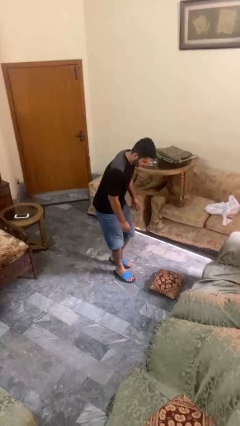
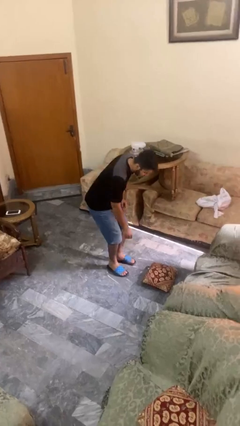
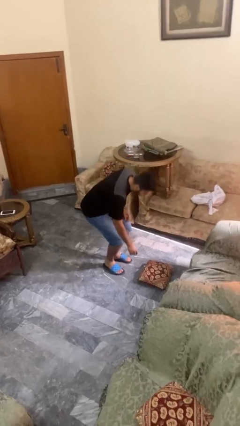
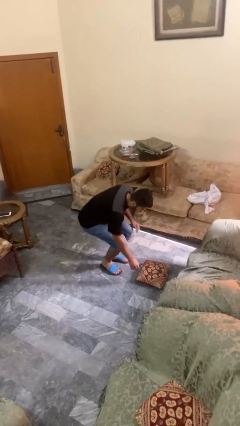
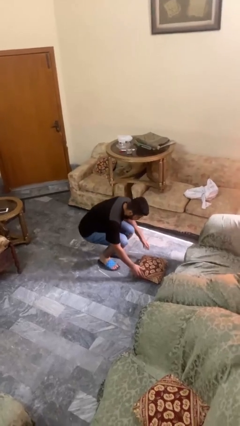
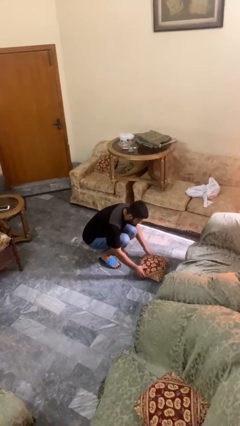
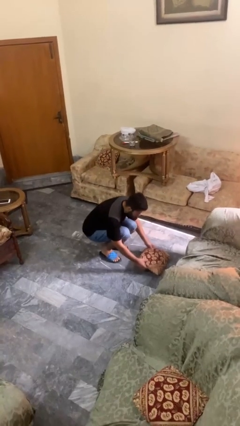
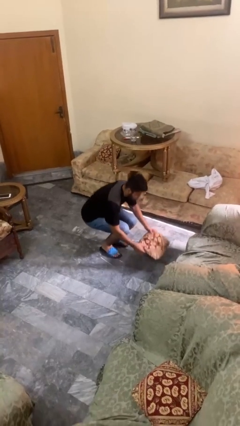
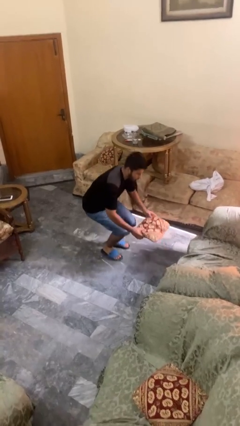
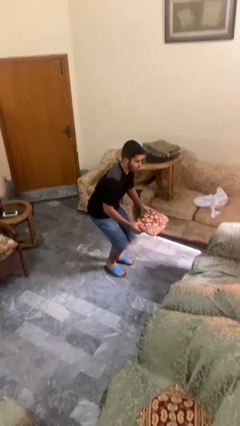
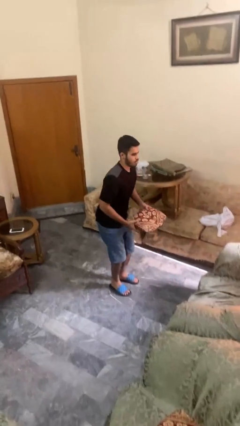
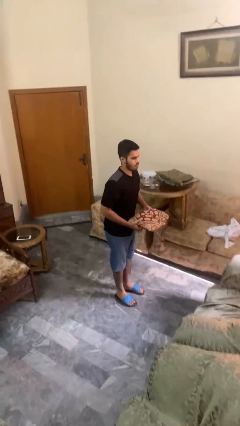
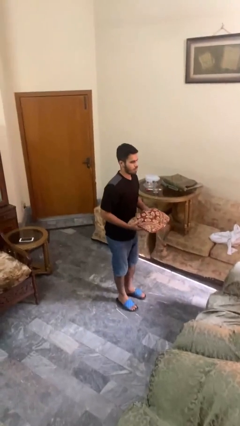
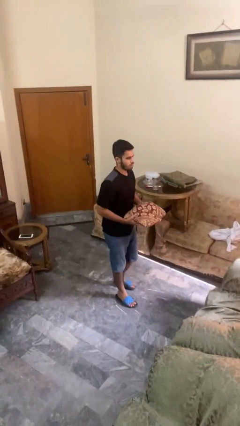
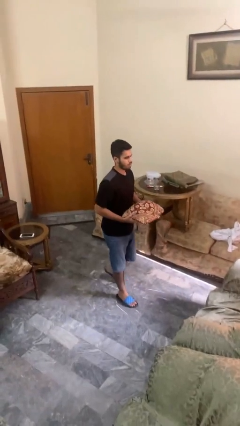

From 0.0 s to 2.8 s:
person picks up object from floor

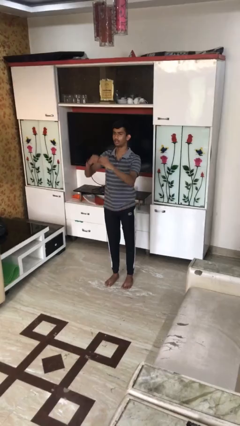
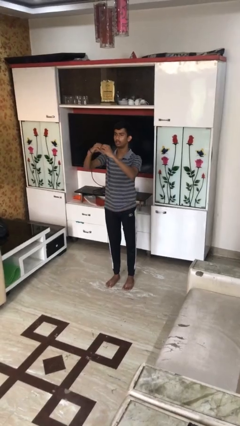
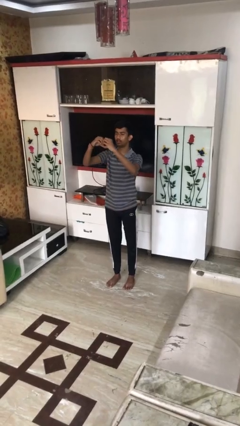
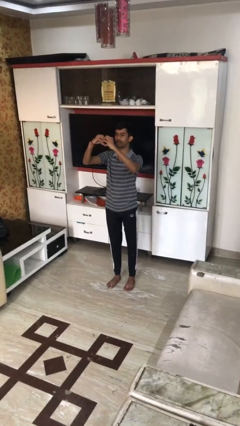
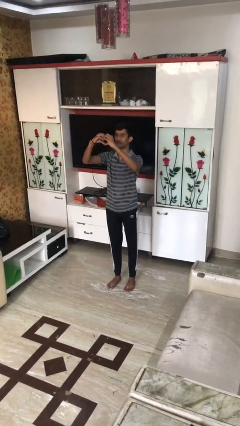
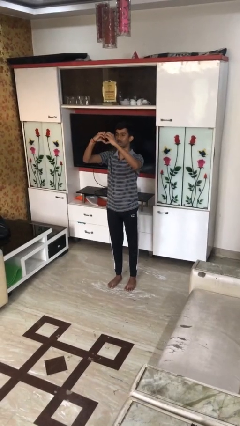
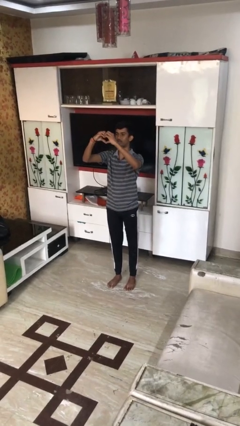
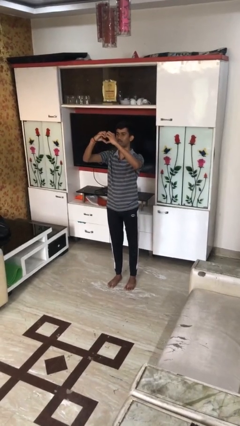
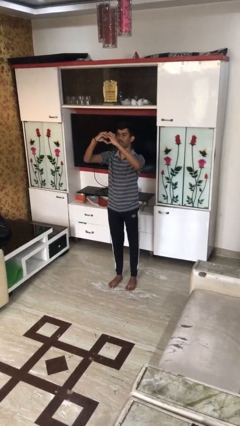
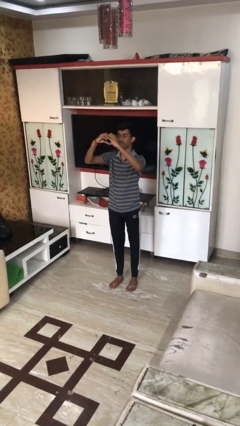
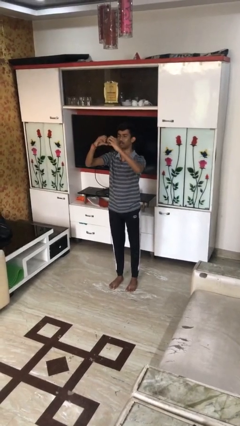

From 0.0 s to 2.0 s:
person gestures heart

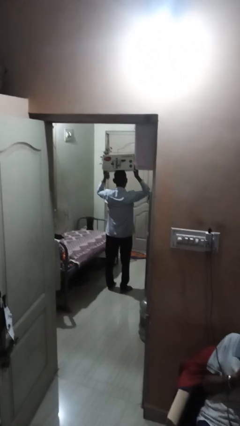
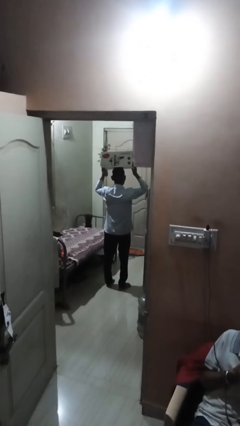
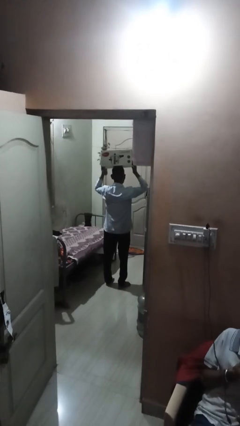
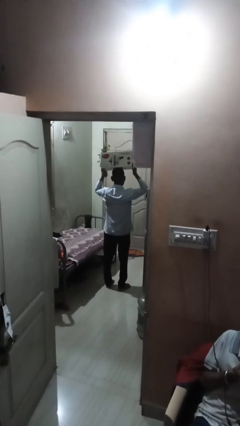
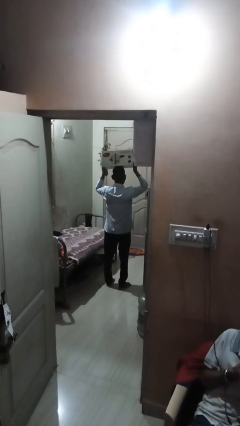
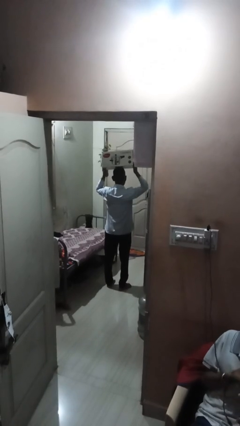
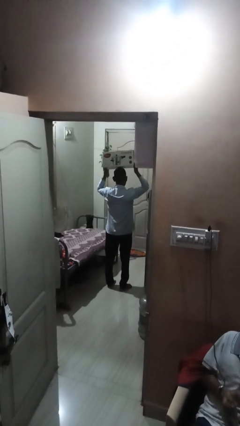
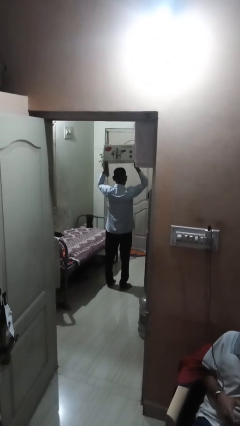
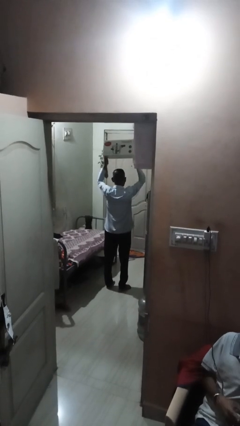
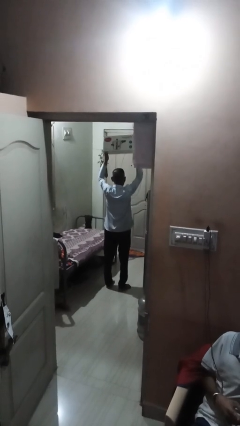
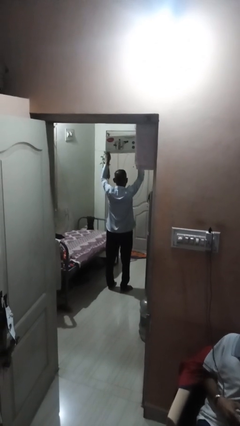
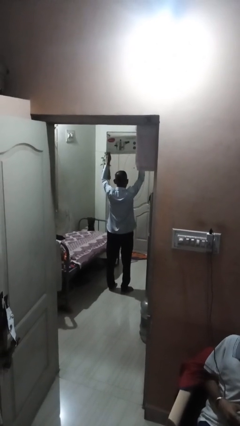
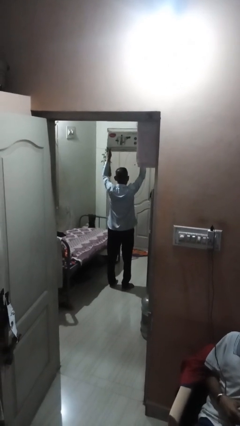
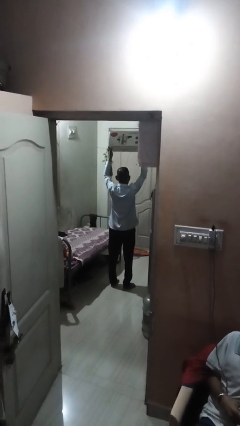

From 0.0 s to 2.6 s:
person holds object above head

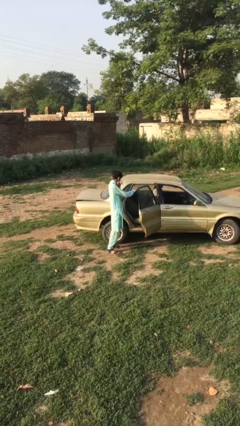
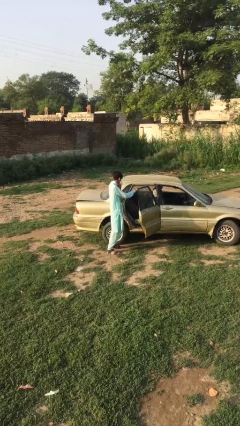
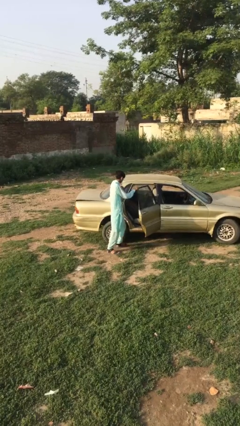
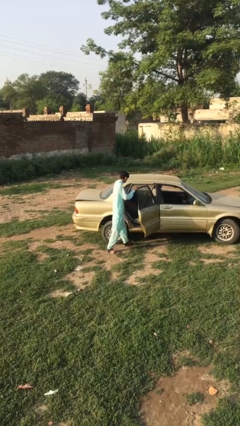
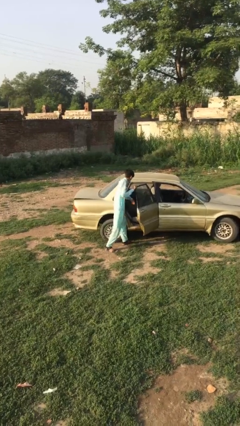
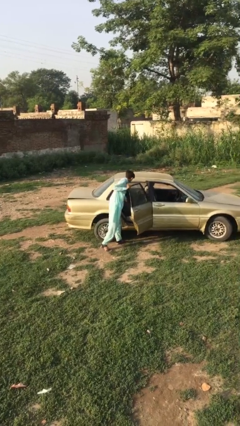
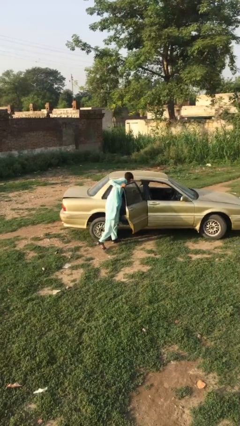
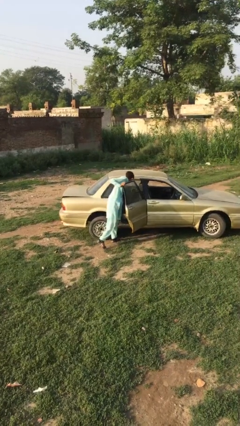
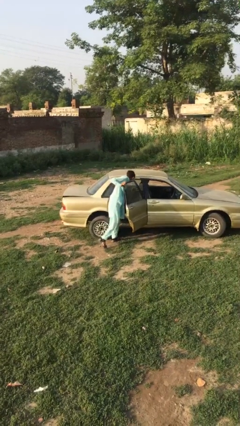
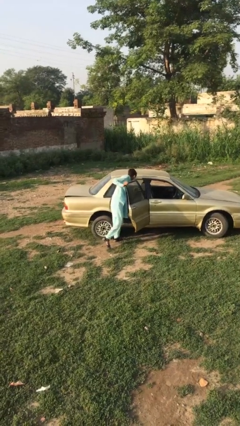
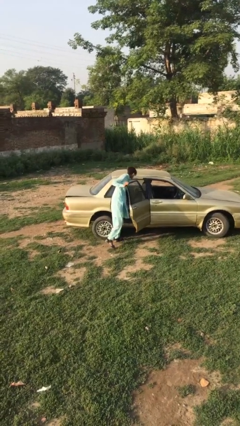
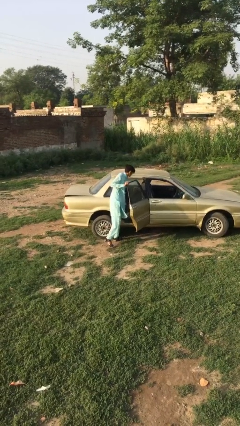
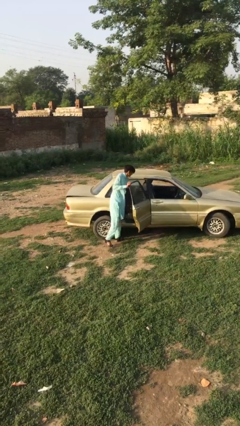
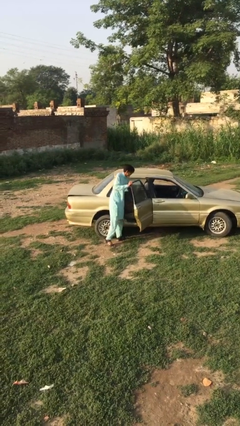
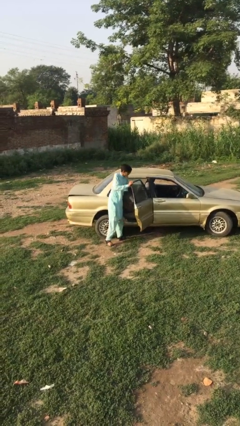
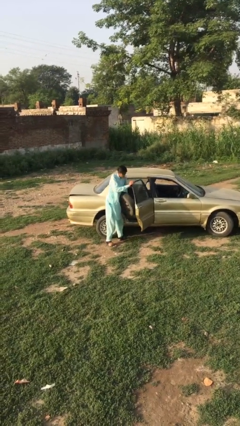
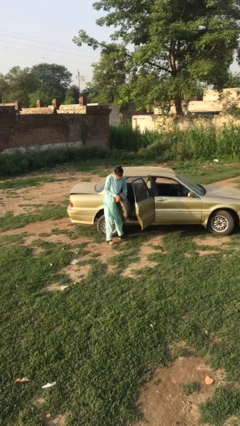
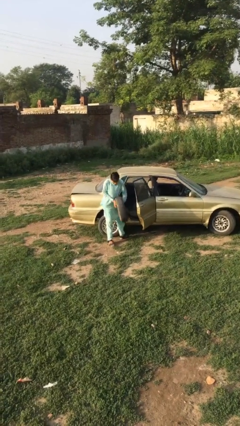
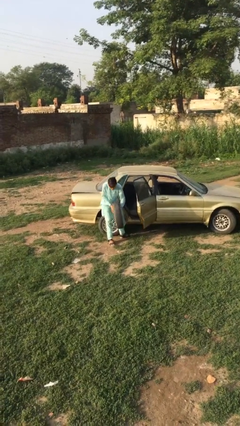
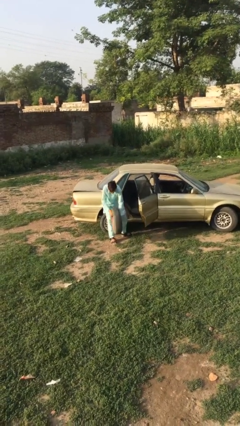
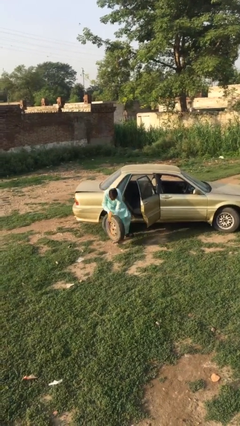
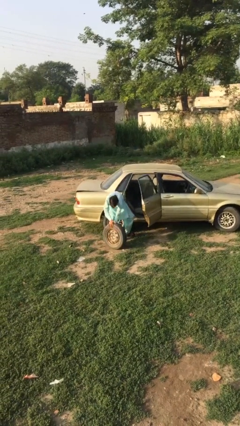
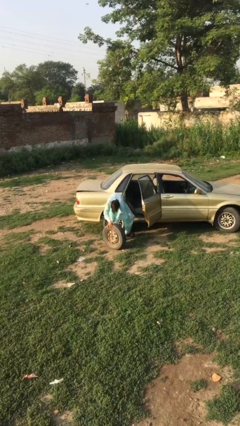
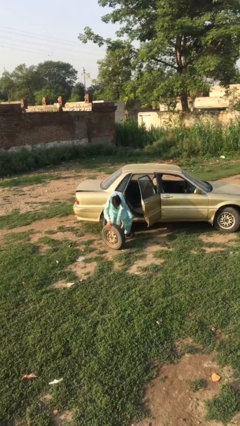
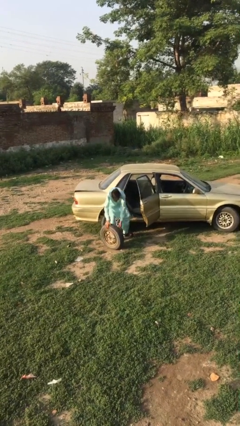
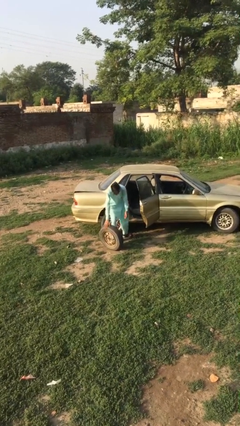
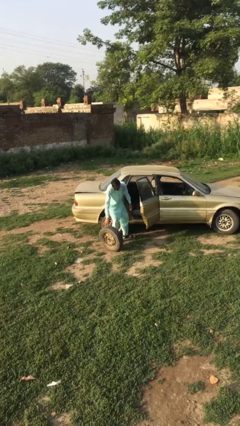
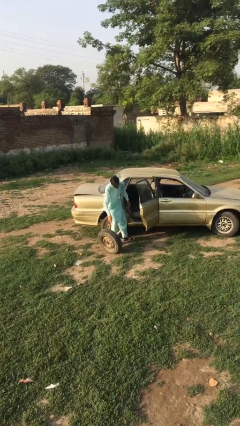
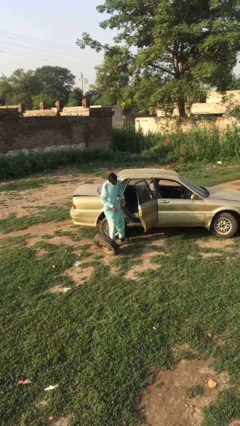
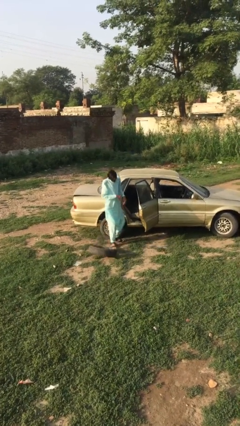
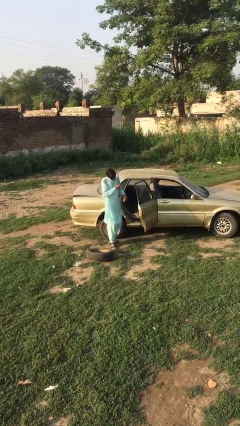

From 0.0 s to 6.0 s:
person unloads car

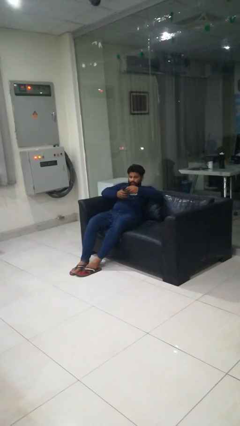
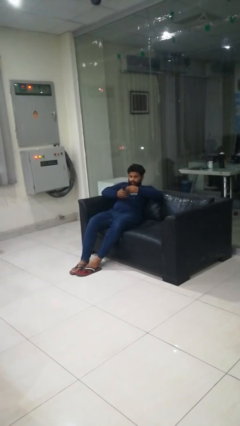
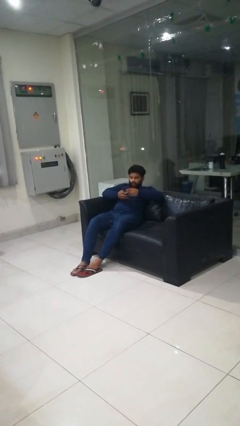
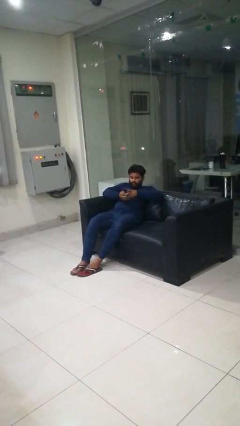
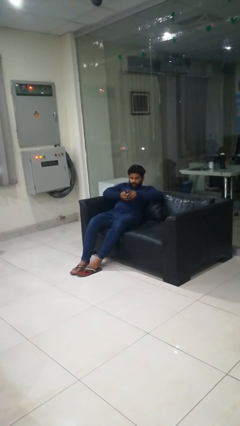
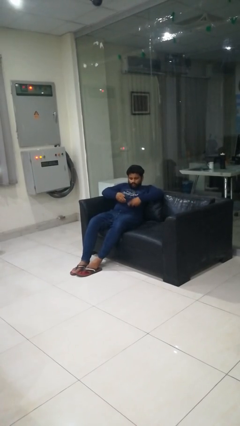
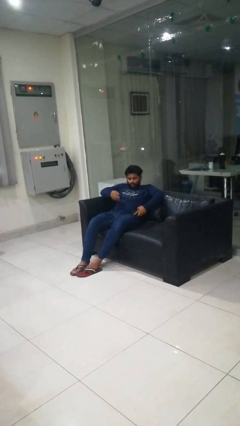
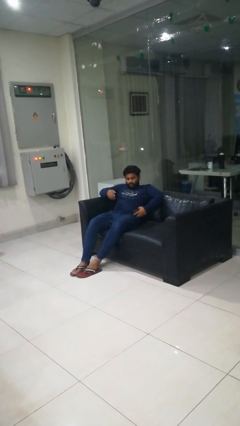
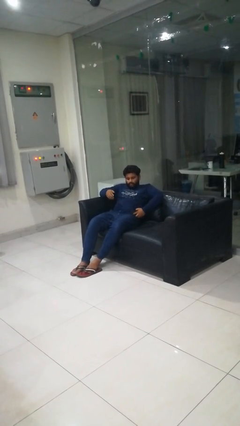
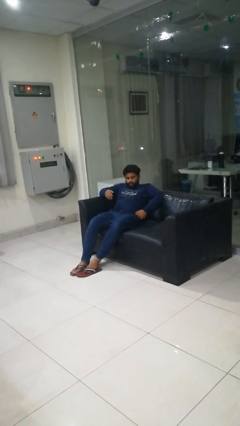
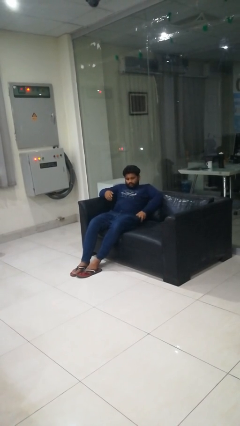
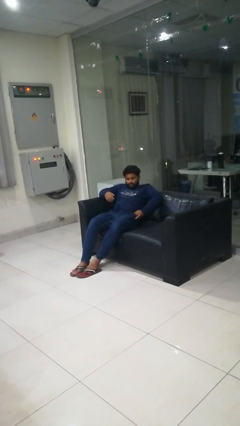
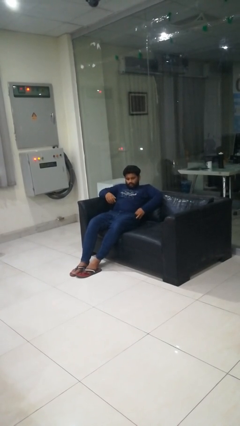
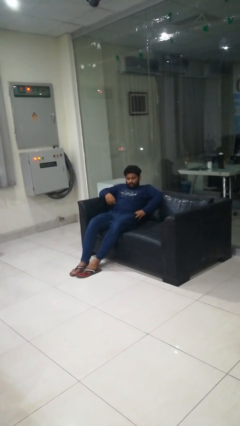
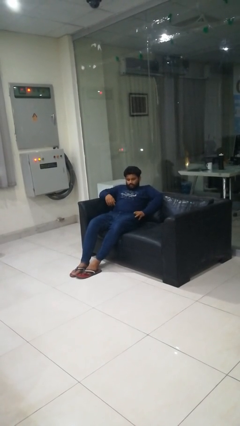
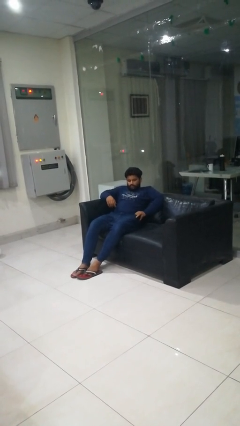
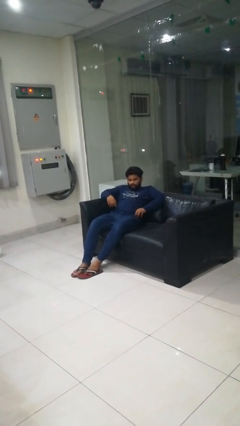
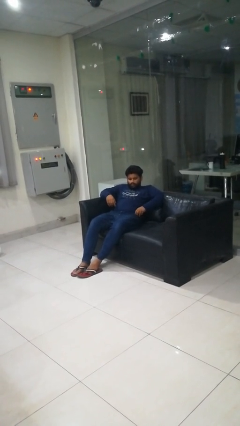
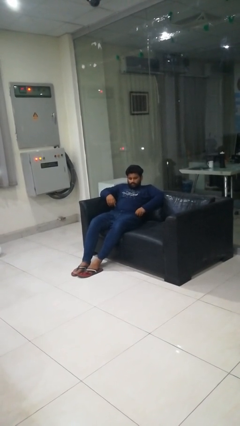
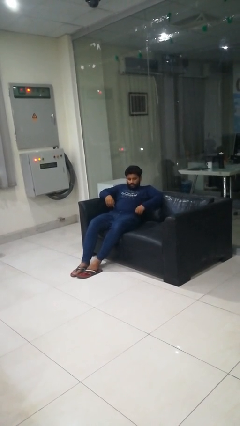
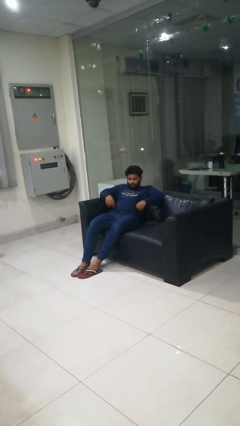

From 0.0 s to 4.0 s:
person puts phone into pocket
